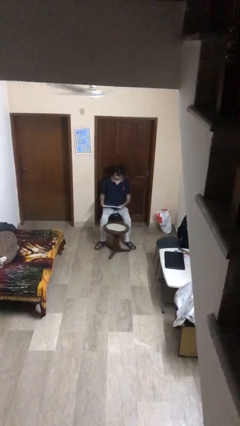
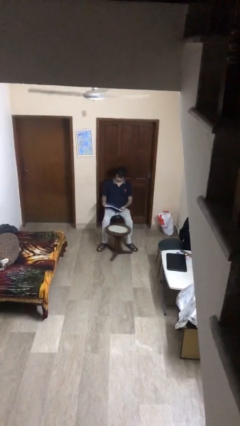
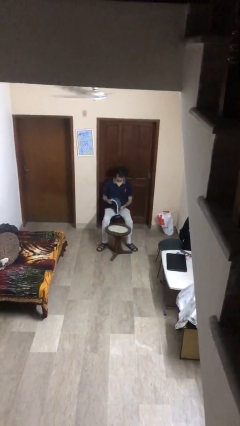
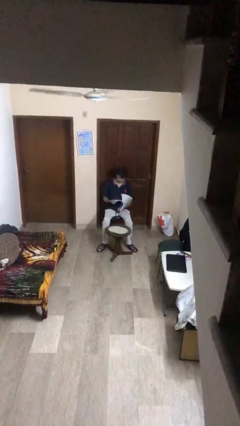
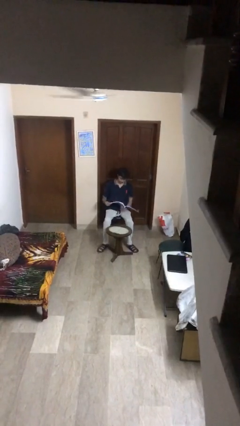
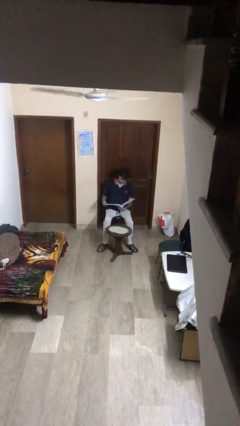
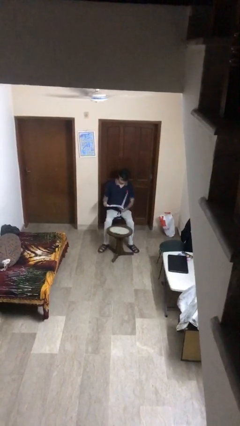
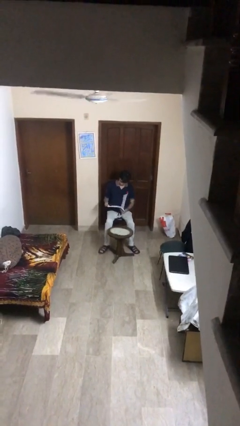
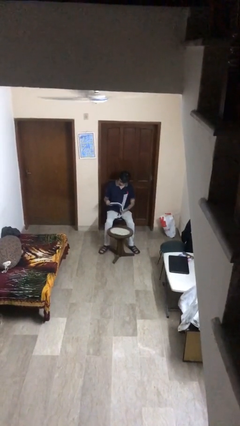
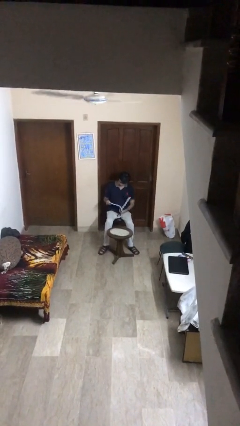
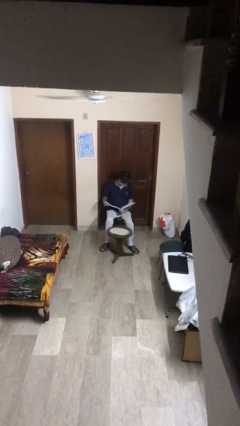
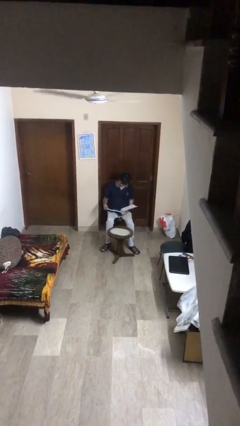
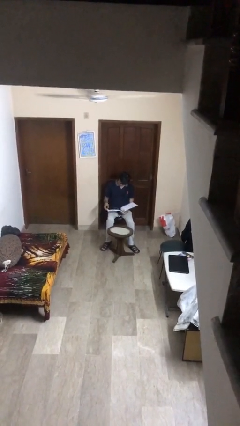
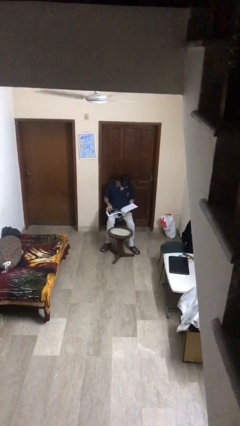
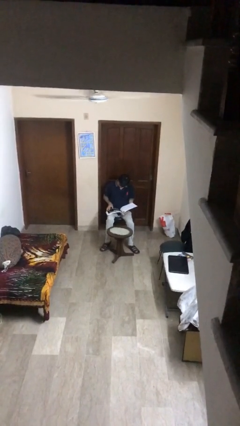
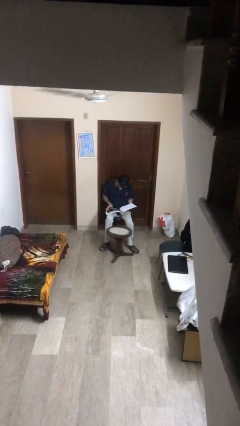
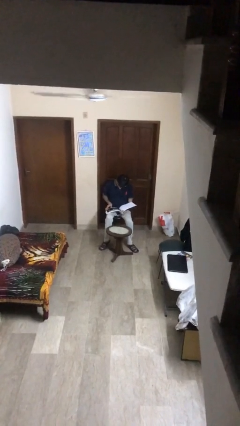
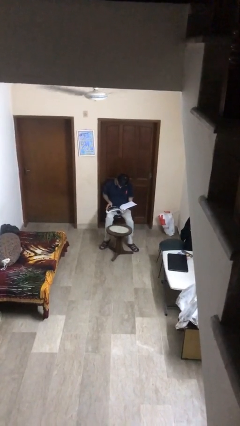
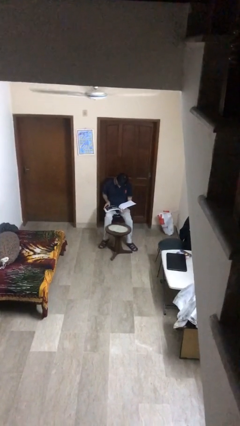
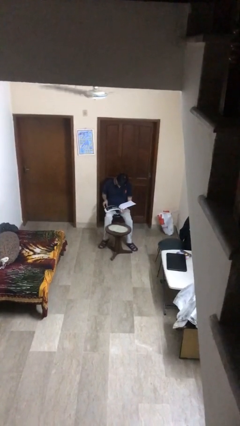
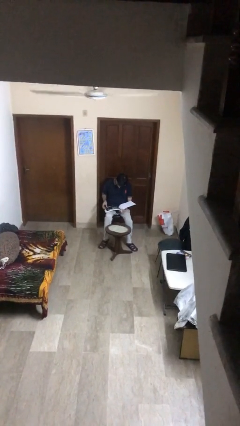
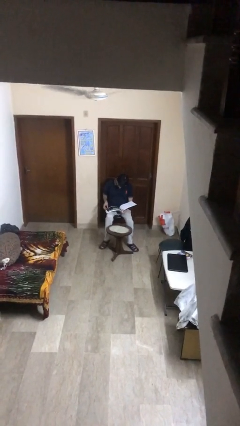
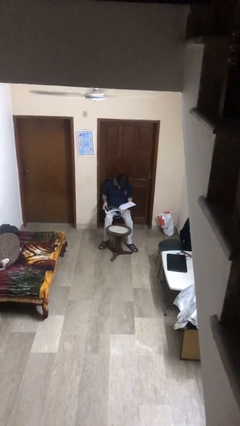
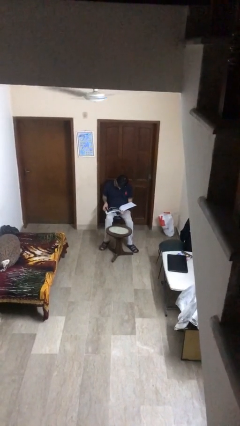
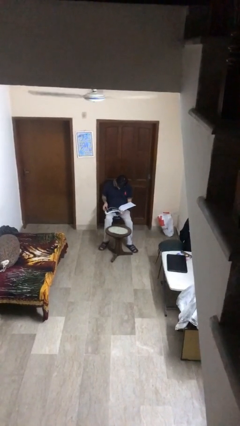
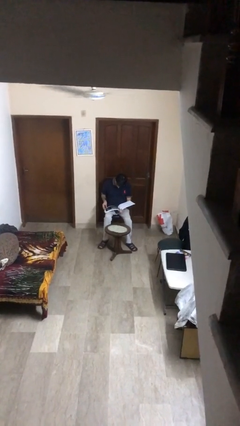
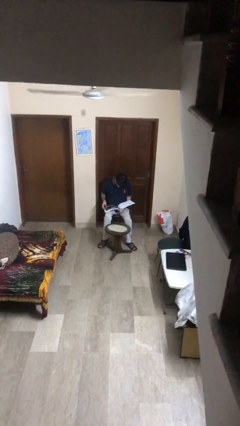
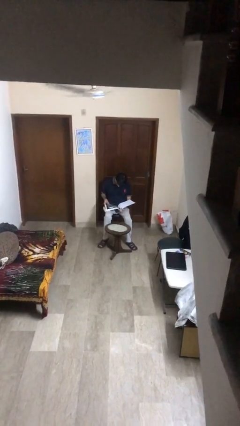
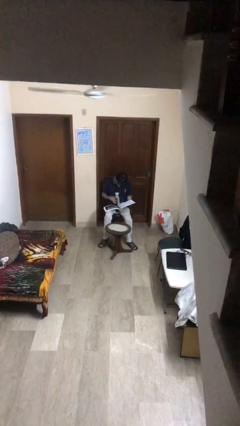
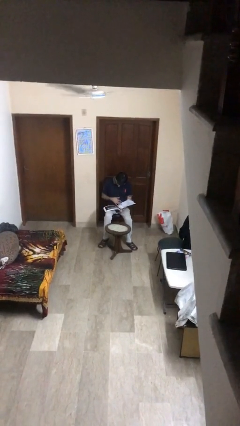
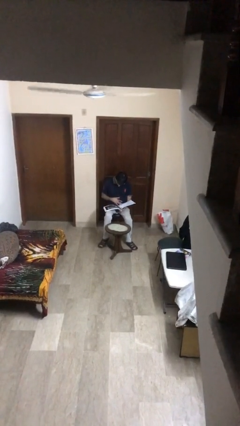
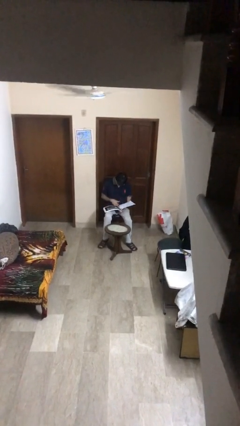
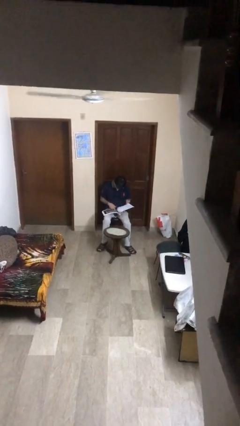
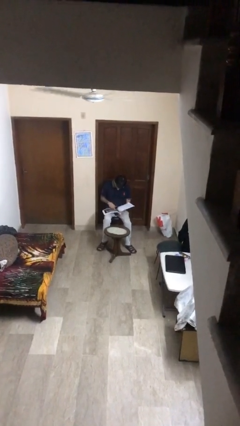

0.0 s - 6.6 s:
person reads document

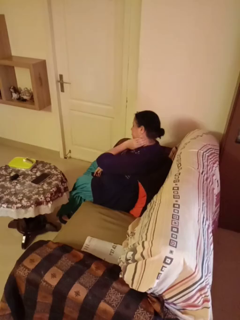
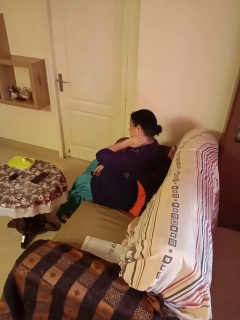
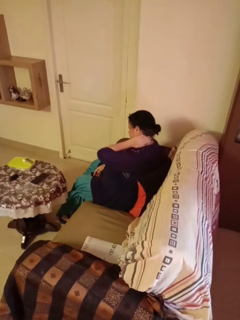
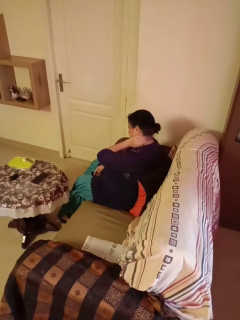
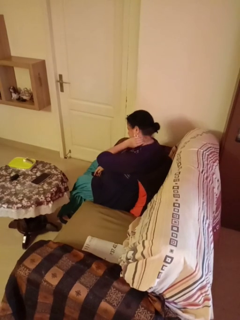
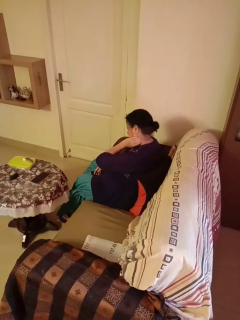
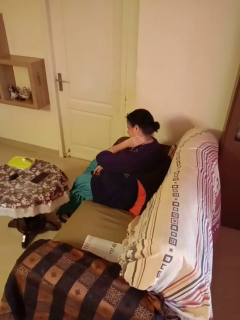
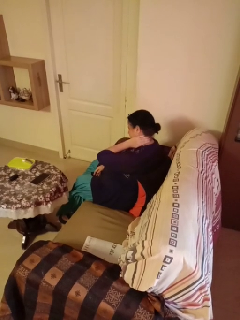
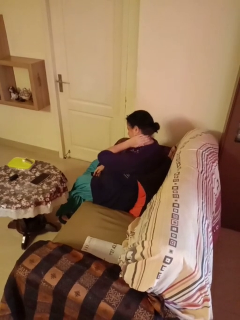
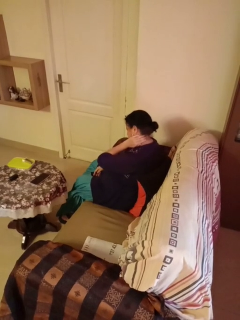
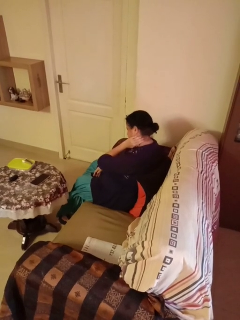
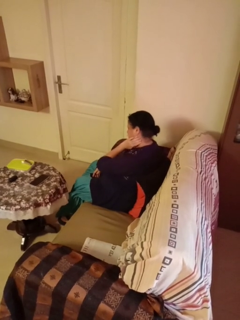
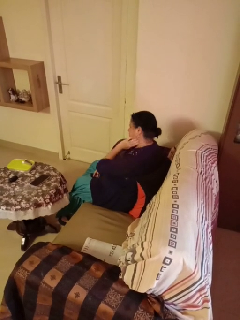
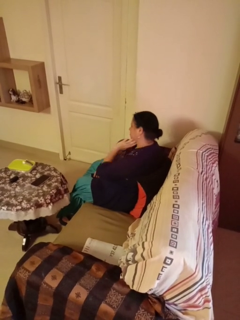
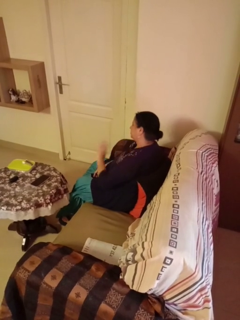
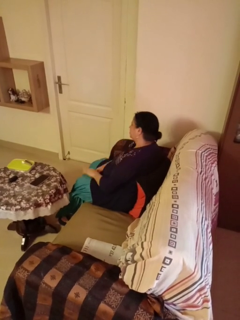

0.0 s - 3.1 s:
person rubs neck

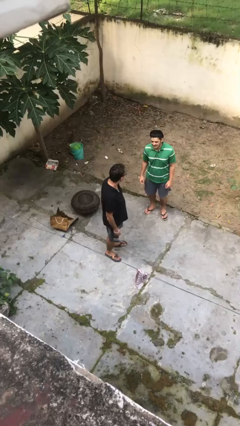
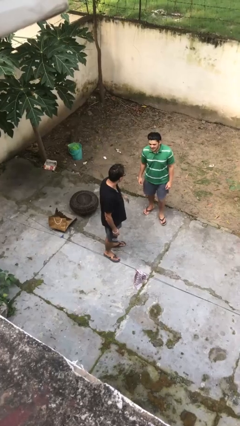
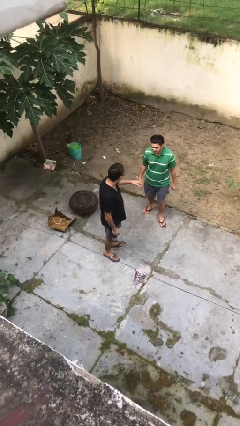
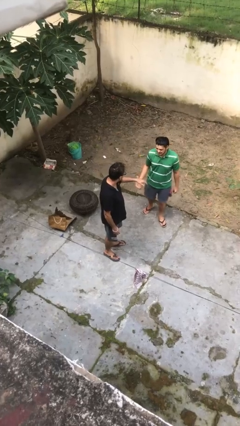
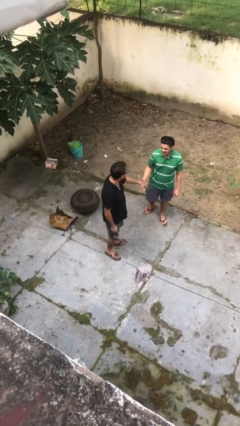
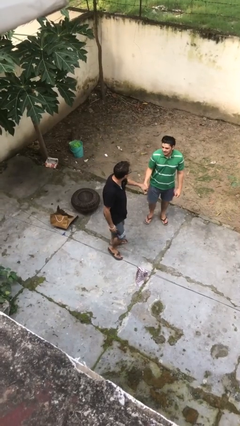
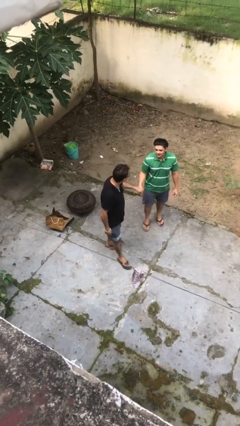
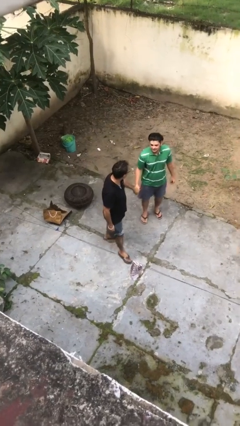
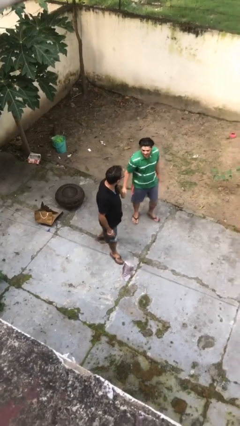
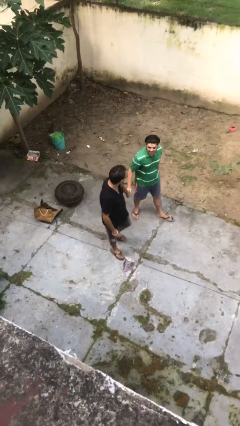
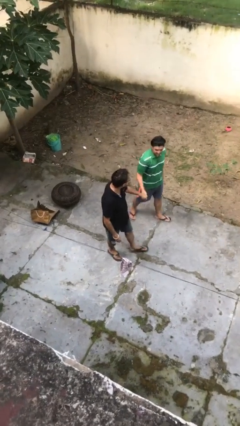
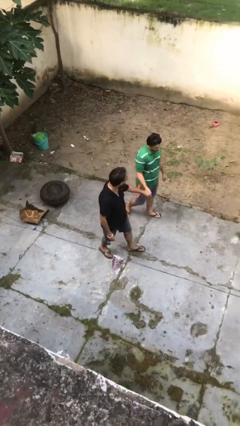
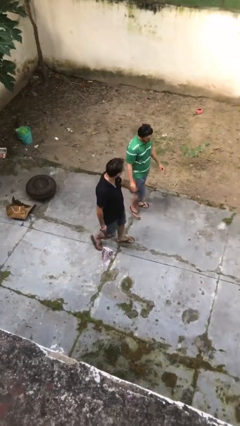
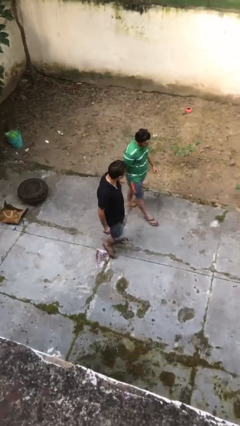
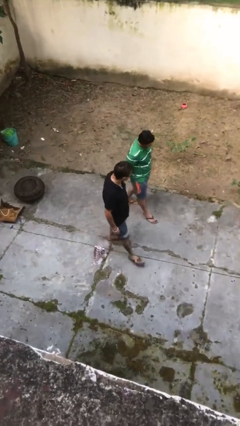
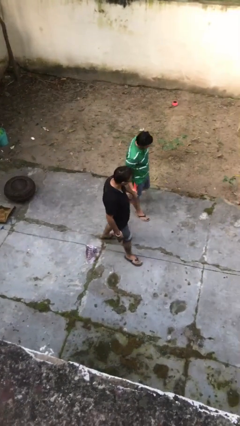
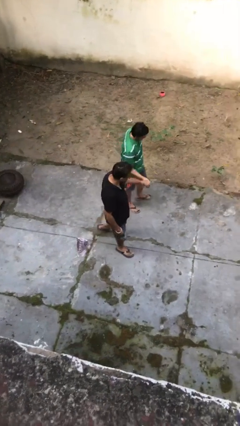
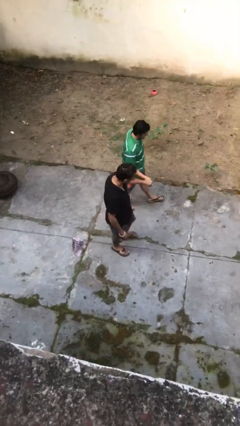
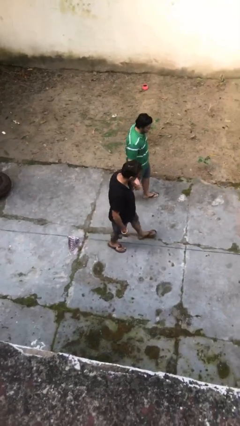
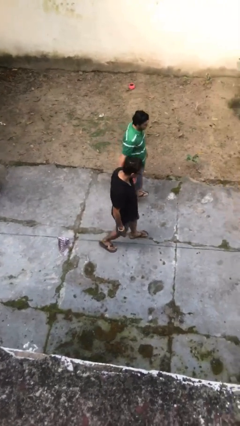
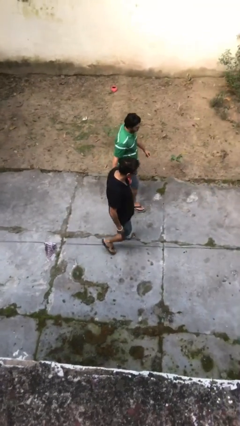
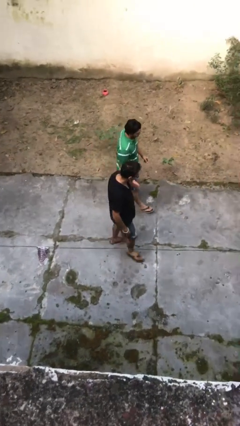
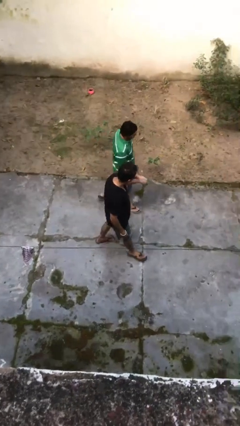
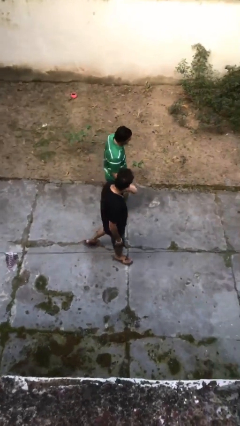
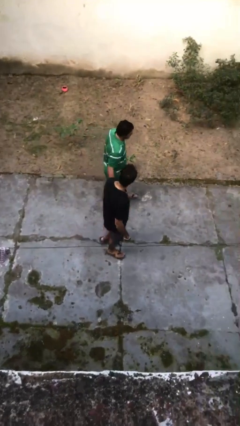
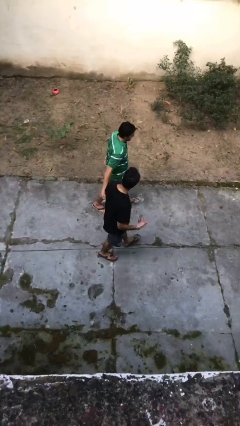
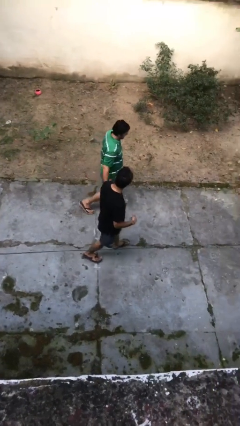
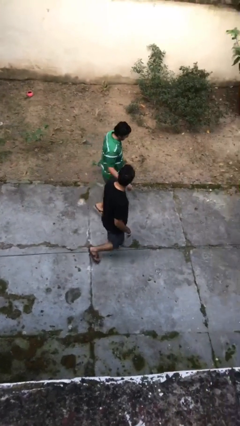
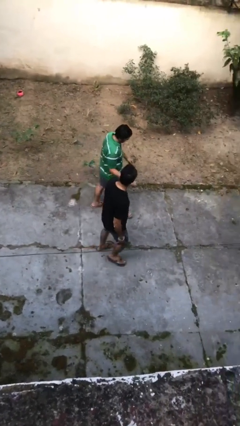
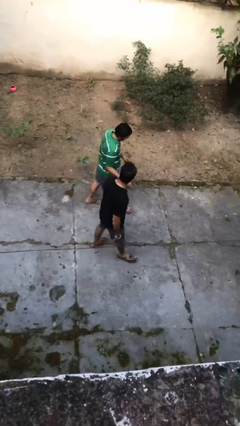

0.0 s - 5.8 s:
person holds hand

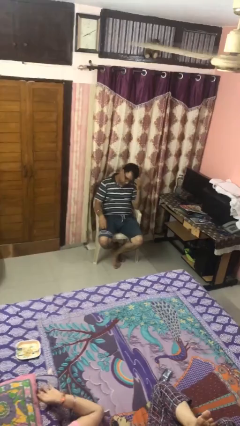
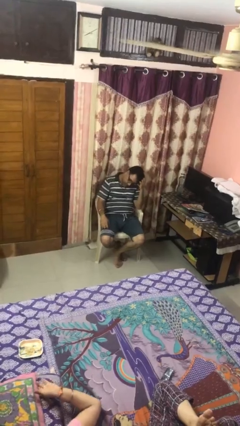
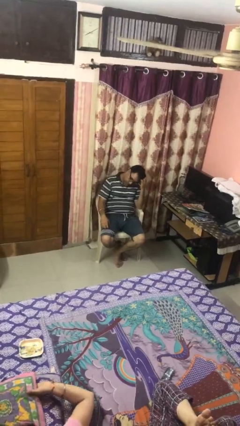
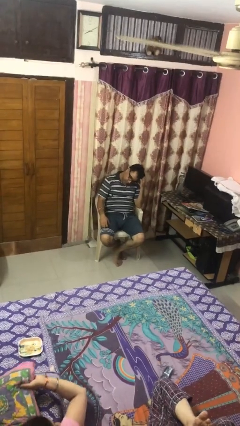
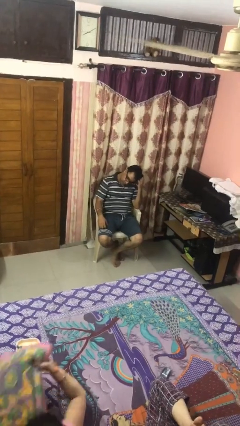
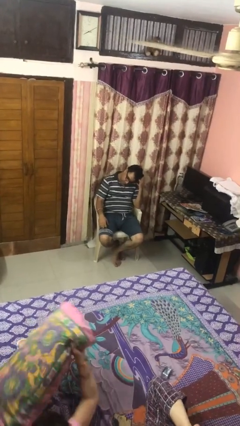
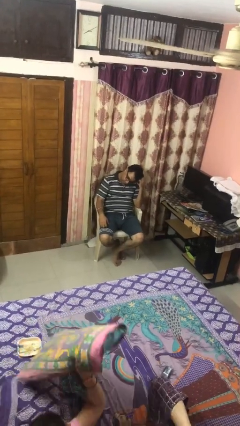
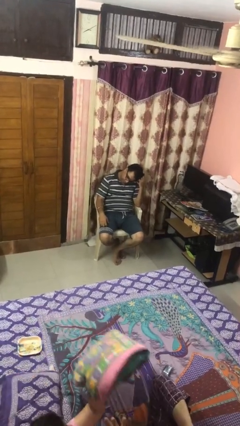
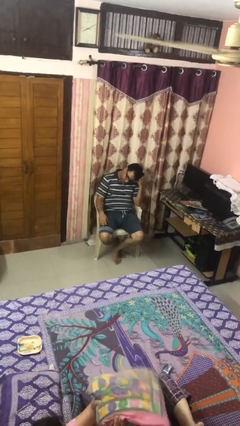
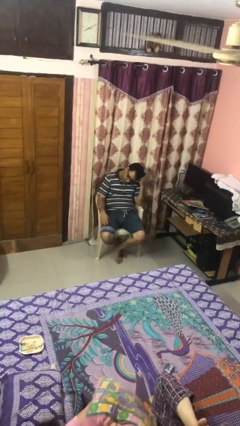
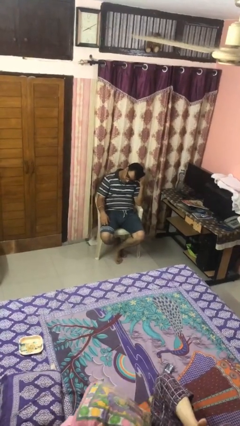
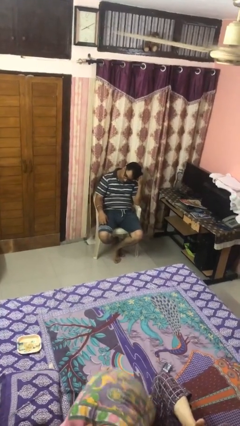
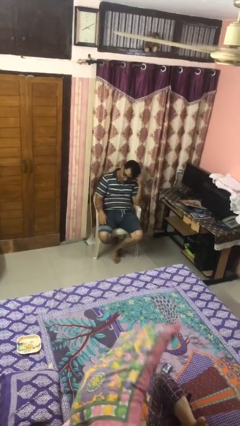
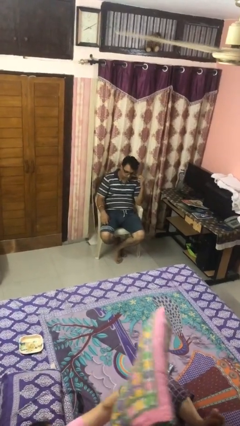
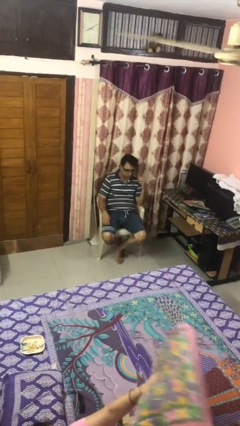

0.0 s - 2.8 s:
person scratches face
